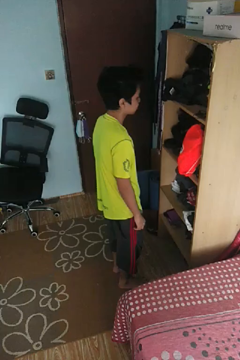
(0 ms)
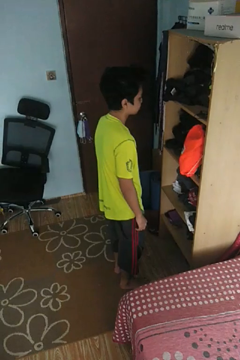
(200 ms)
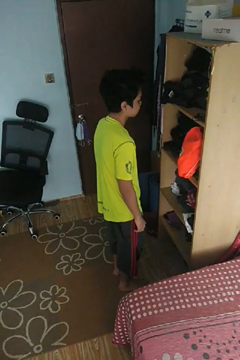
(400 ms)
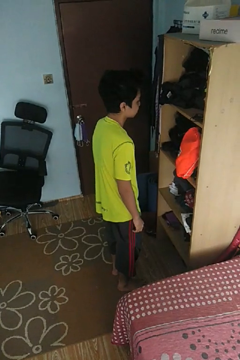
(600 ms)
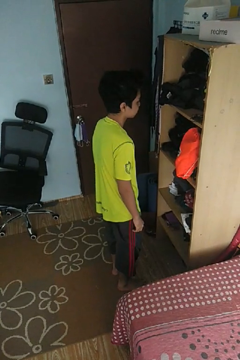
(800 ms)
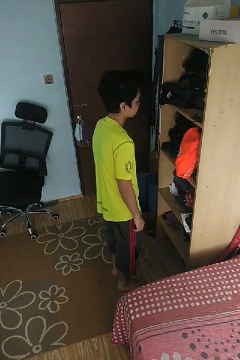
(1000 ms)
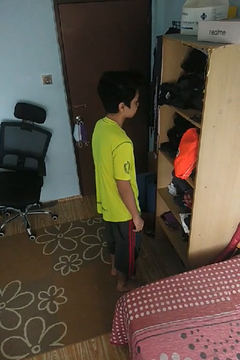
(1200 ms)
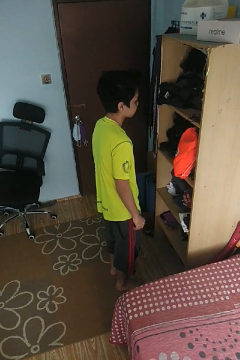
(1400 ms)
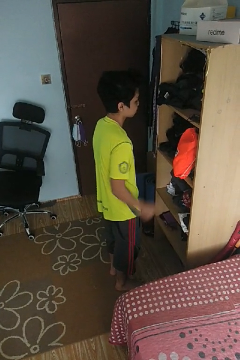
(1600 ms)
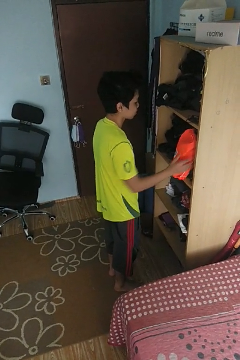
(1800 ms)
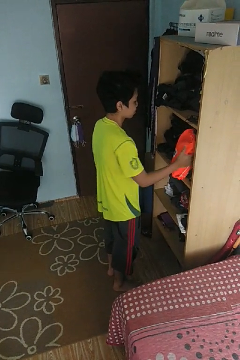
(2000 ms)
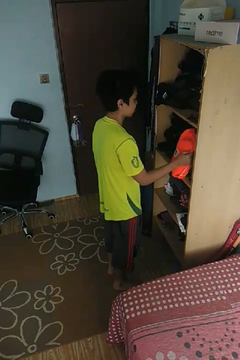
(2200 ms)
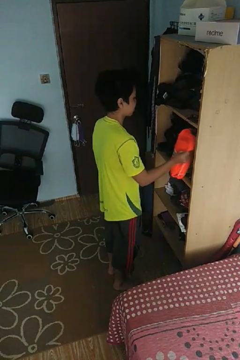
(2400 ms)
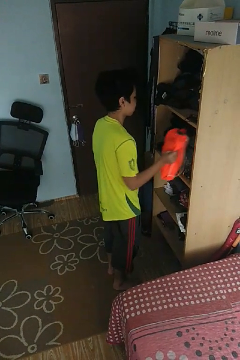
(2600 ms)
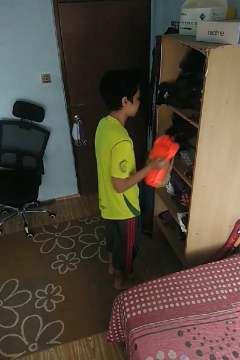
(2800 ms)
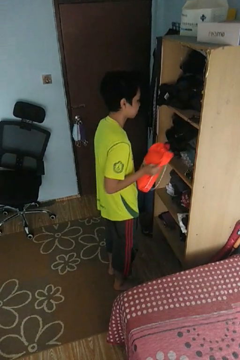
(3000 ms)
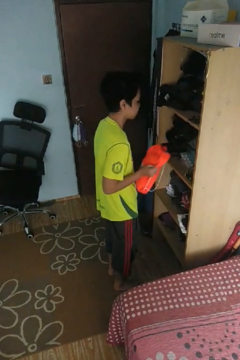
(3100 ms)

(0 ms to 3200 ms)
person picks up object from cabinet

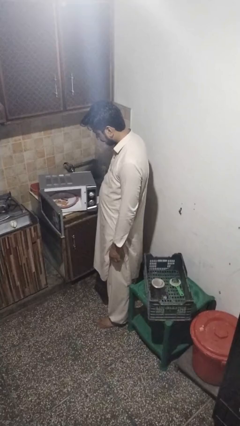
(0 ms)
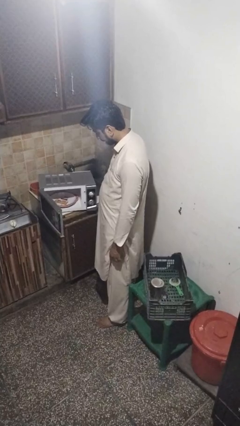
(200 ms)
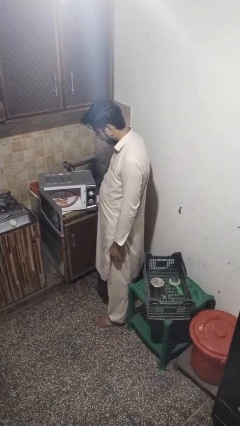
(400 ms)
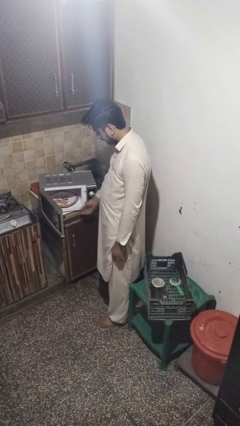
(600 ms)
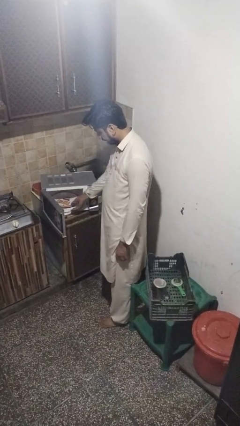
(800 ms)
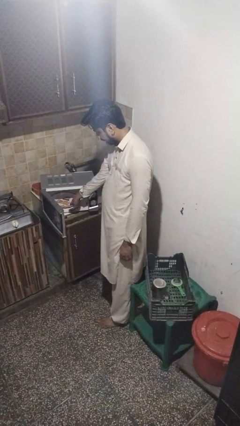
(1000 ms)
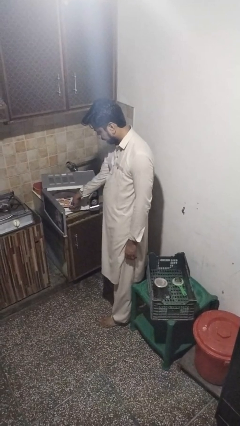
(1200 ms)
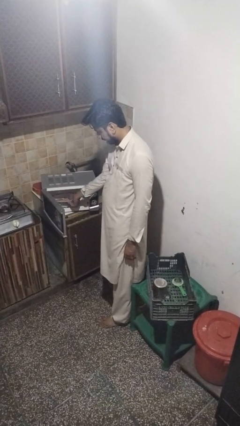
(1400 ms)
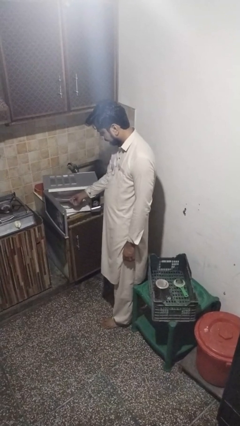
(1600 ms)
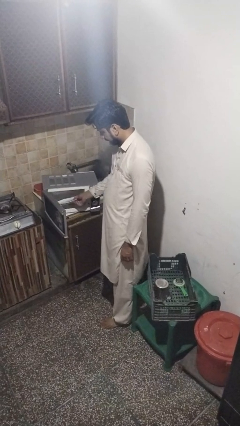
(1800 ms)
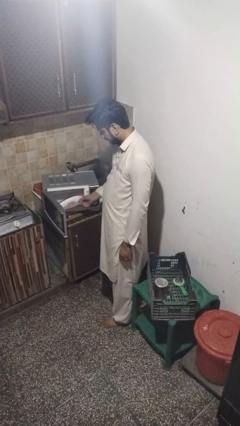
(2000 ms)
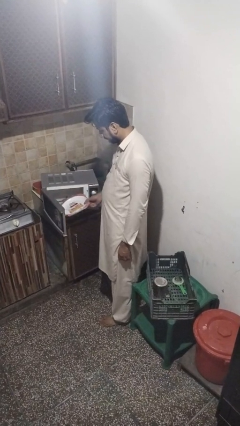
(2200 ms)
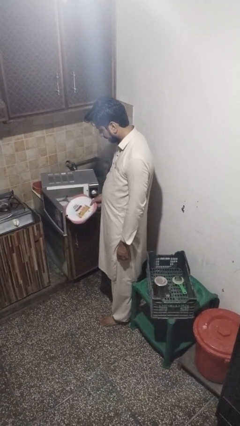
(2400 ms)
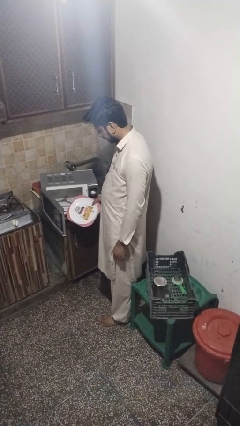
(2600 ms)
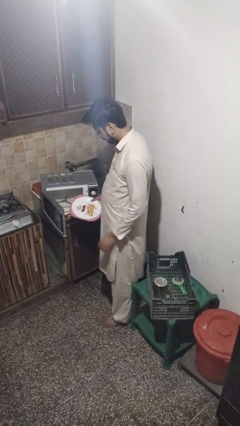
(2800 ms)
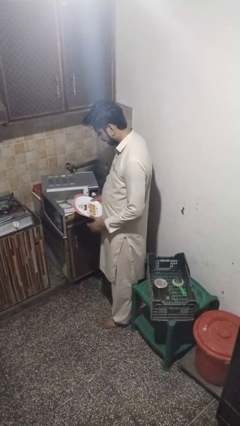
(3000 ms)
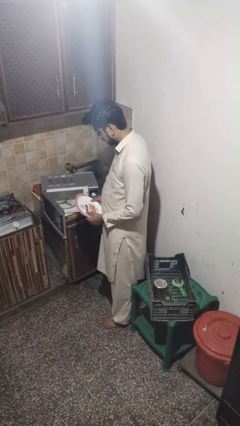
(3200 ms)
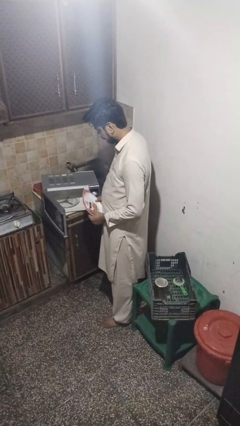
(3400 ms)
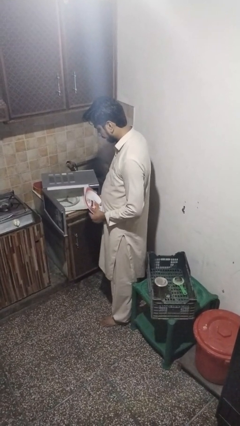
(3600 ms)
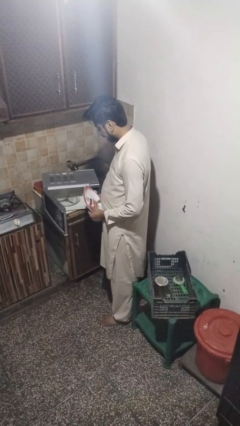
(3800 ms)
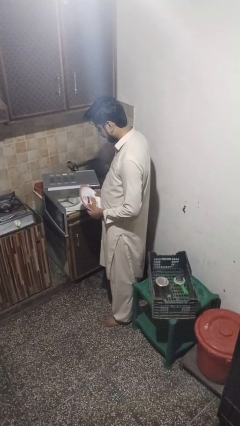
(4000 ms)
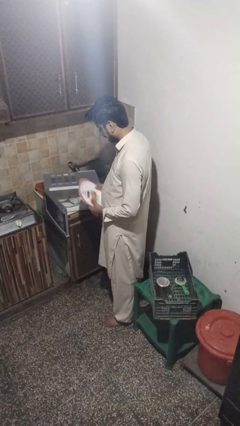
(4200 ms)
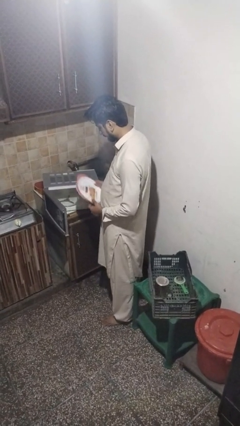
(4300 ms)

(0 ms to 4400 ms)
person takes object from microwave

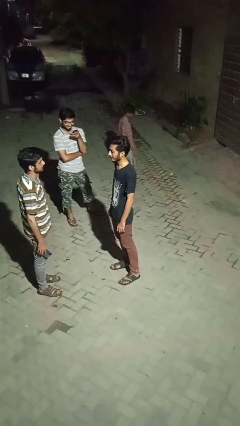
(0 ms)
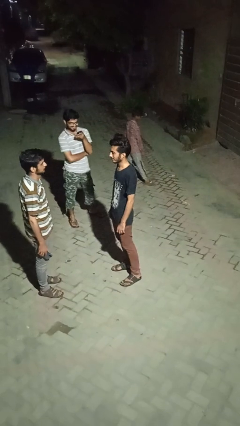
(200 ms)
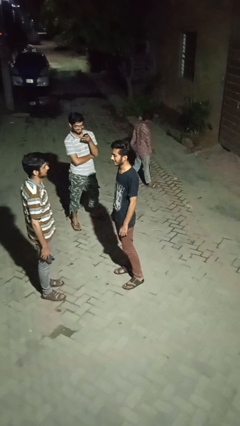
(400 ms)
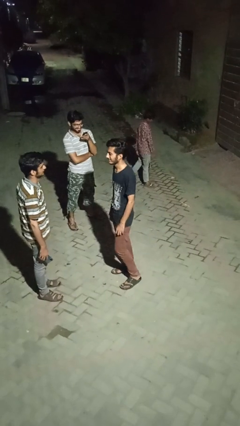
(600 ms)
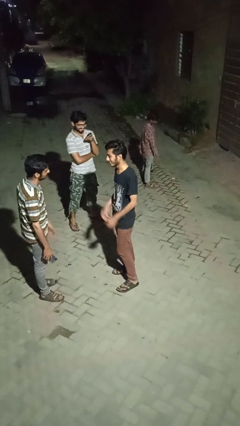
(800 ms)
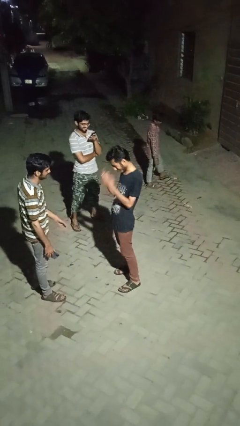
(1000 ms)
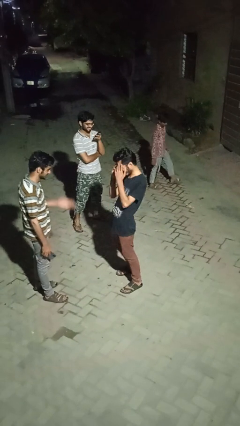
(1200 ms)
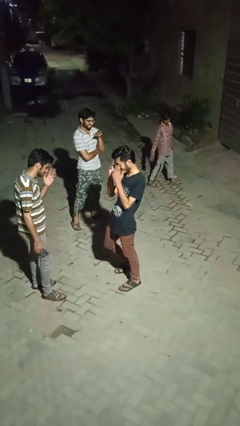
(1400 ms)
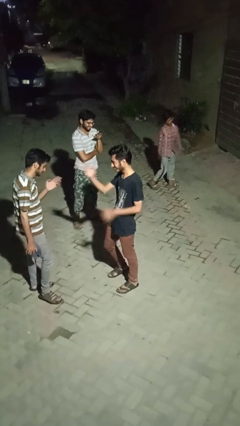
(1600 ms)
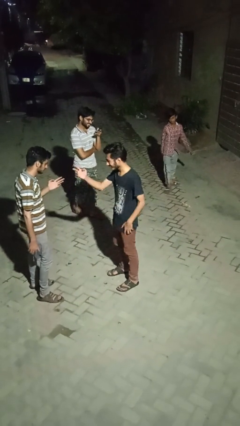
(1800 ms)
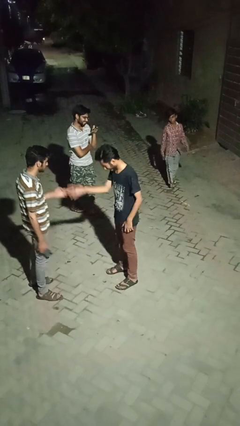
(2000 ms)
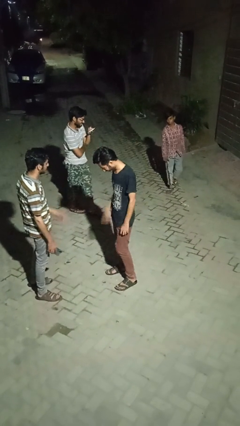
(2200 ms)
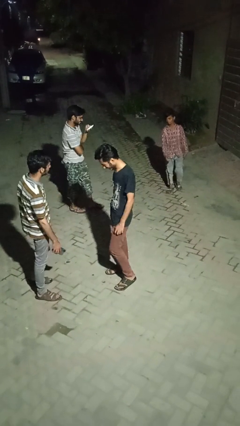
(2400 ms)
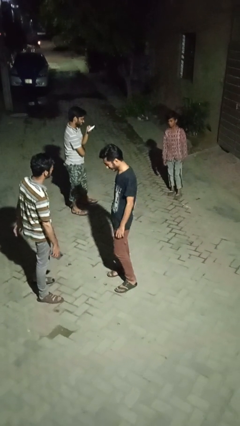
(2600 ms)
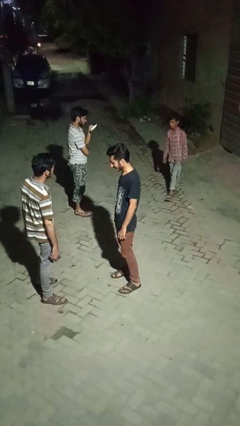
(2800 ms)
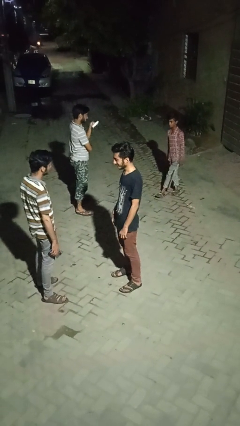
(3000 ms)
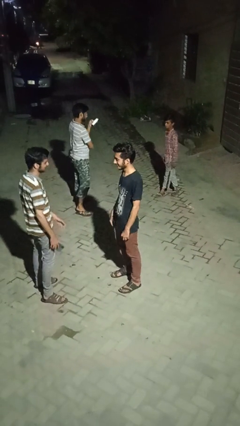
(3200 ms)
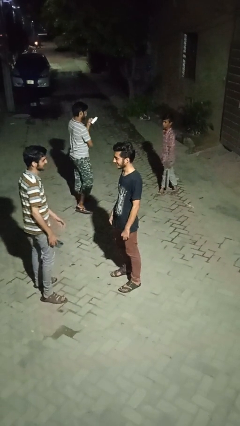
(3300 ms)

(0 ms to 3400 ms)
person laughs with person

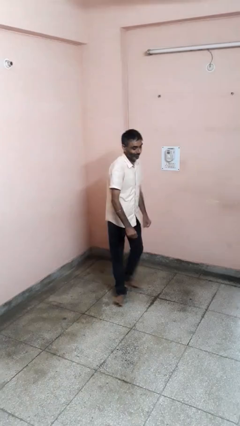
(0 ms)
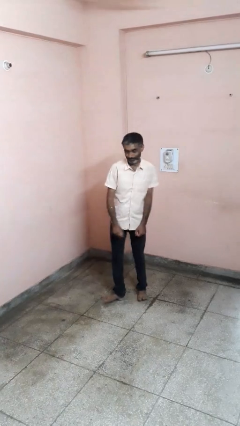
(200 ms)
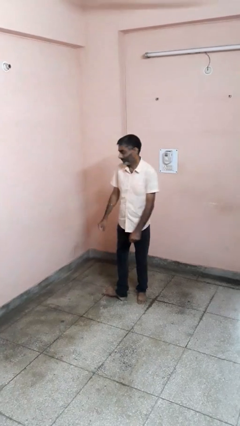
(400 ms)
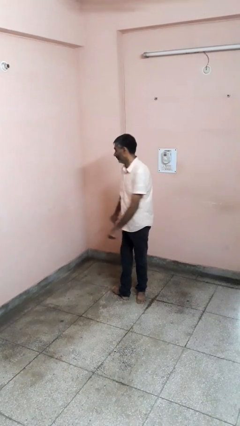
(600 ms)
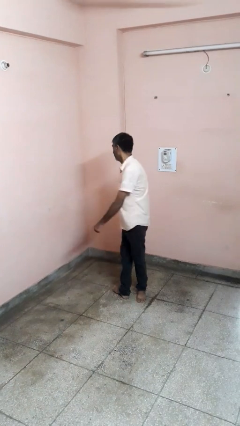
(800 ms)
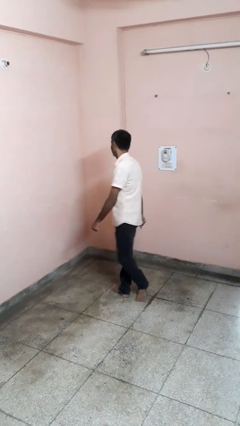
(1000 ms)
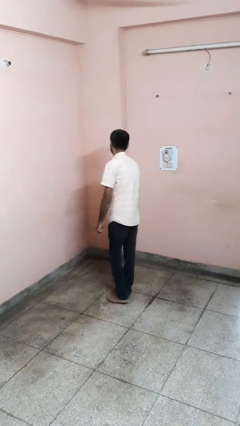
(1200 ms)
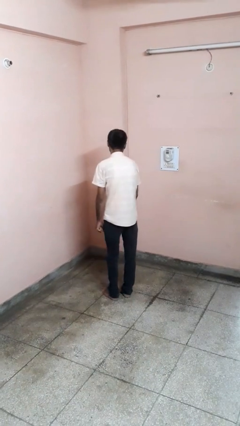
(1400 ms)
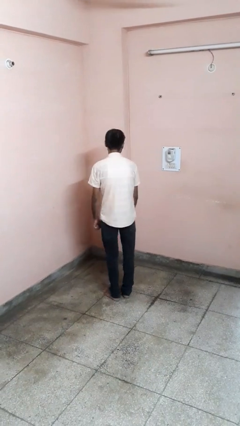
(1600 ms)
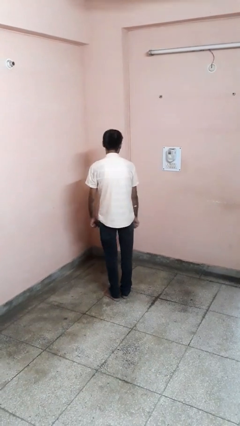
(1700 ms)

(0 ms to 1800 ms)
person twirls

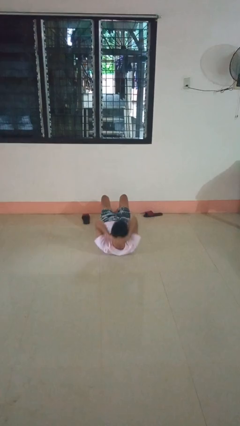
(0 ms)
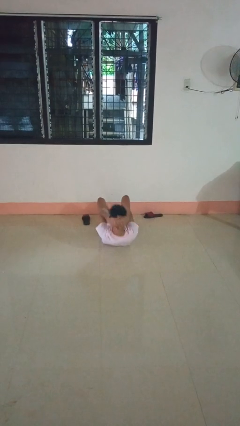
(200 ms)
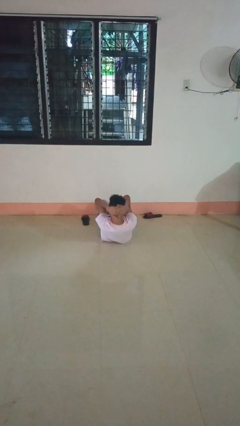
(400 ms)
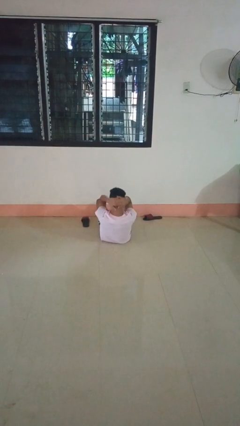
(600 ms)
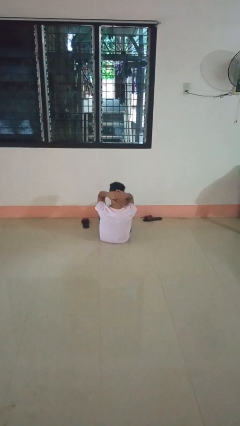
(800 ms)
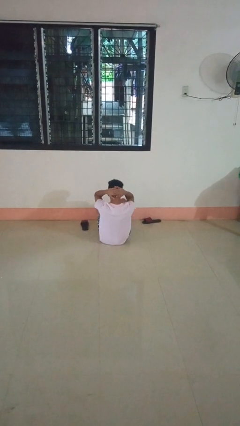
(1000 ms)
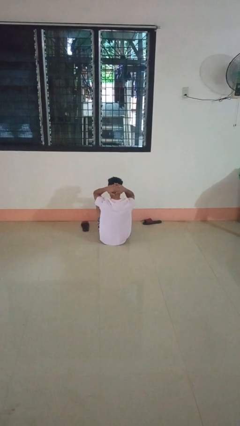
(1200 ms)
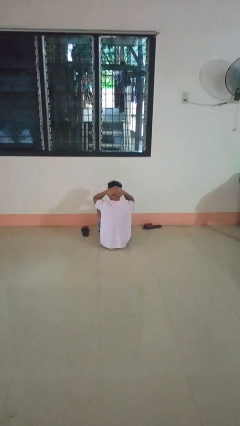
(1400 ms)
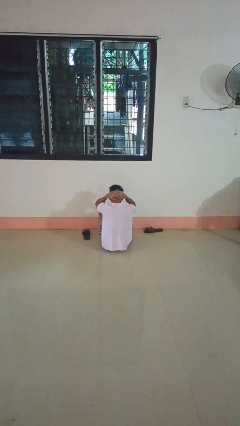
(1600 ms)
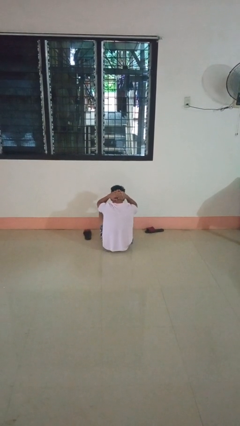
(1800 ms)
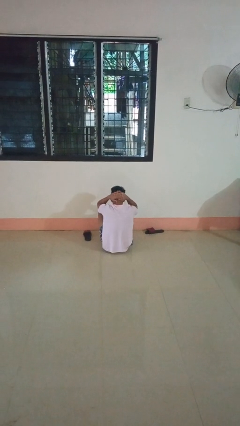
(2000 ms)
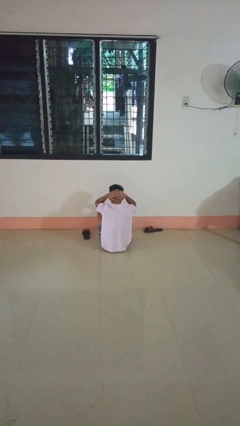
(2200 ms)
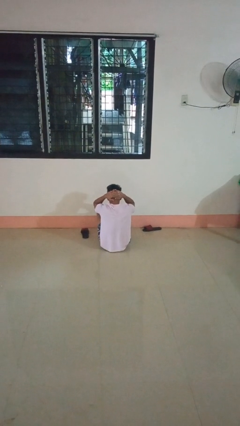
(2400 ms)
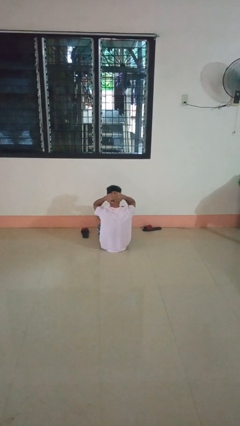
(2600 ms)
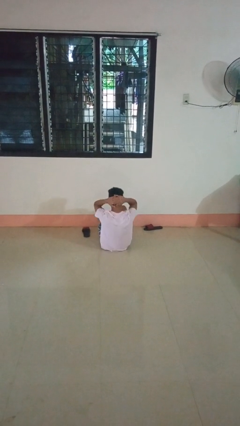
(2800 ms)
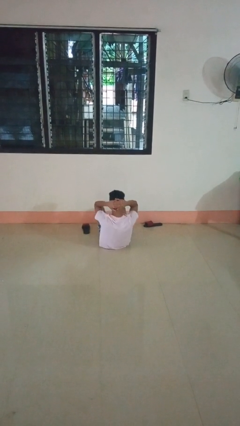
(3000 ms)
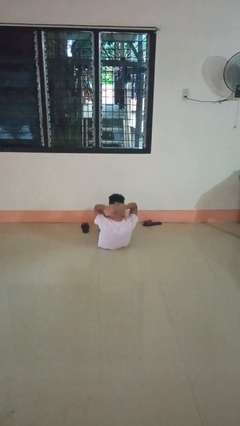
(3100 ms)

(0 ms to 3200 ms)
person exercises with situp

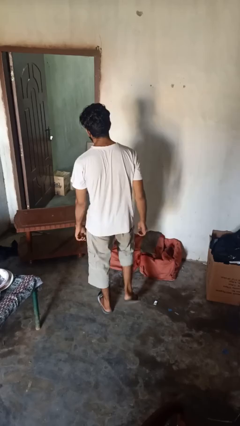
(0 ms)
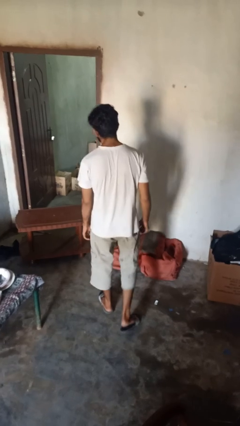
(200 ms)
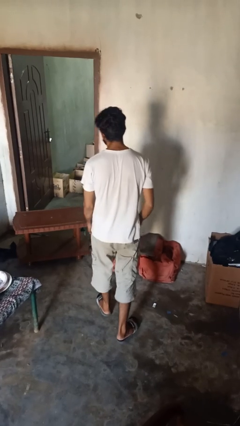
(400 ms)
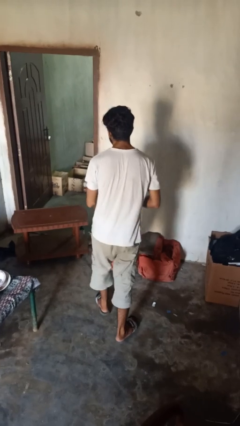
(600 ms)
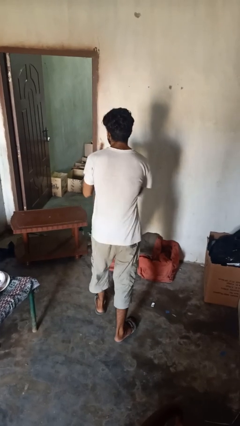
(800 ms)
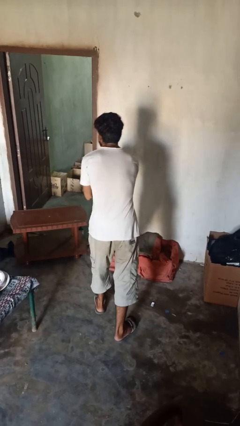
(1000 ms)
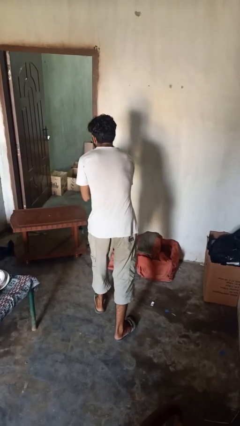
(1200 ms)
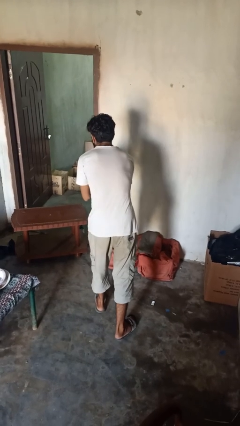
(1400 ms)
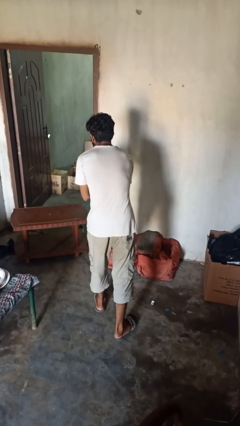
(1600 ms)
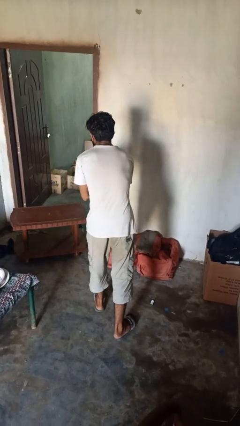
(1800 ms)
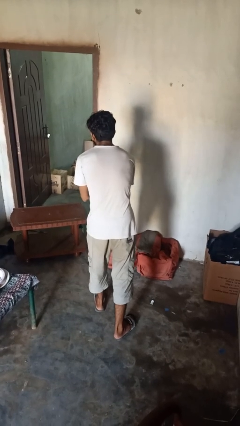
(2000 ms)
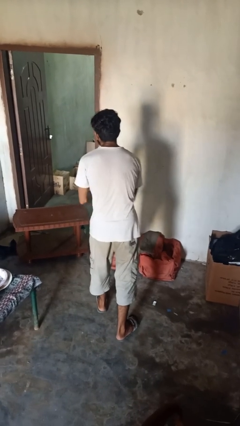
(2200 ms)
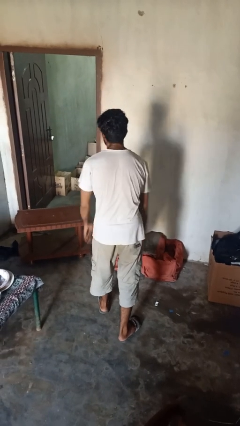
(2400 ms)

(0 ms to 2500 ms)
person karate chop
